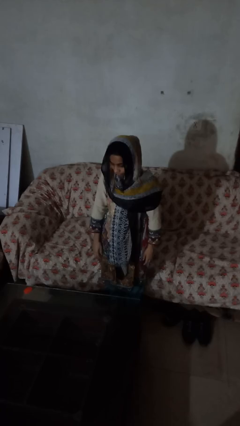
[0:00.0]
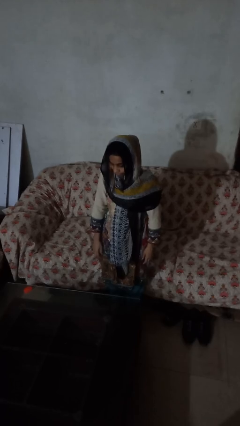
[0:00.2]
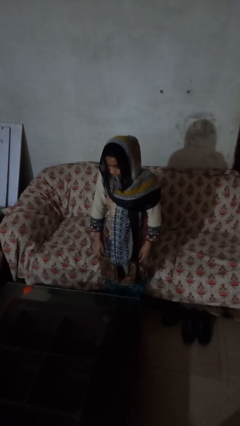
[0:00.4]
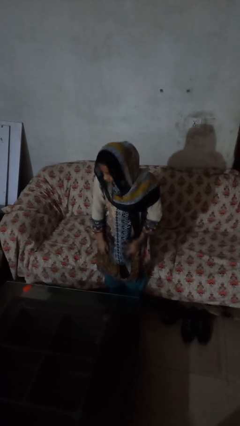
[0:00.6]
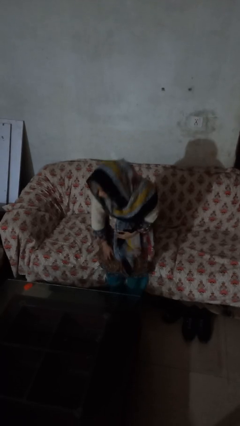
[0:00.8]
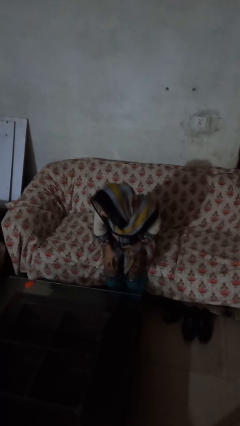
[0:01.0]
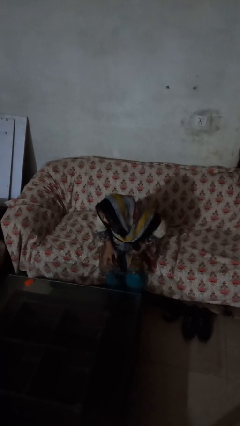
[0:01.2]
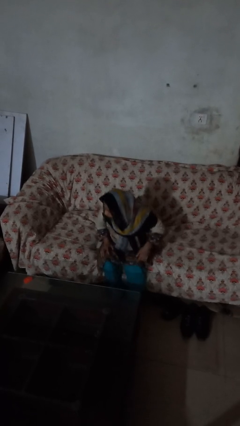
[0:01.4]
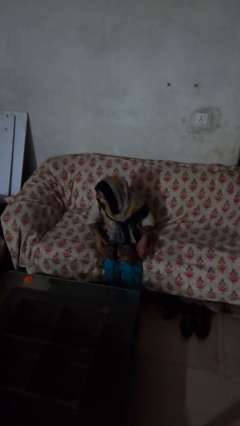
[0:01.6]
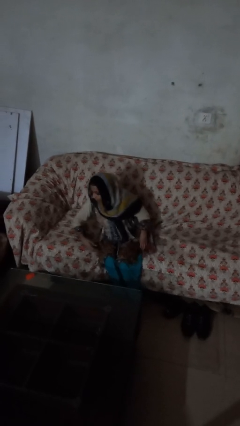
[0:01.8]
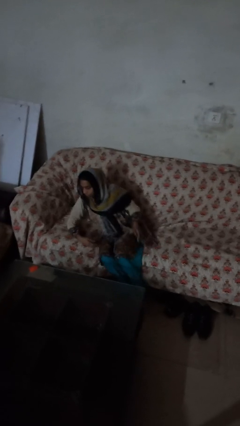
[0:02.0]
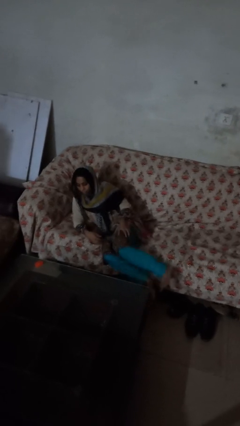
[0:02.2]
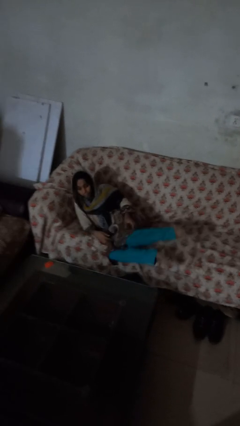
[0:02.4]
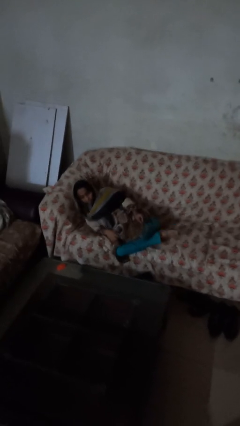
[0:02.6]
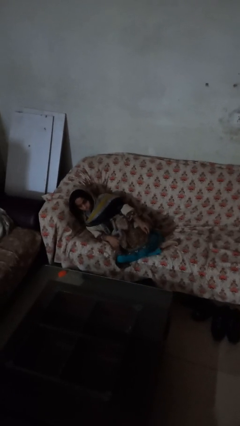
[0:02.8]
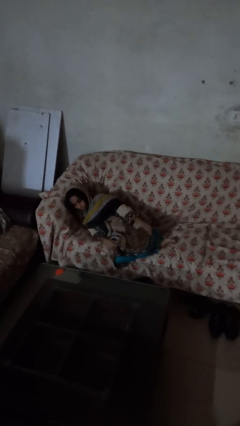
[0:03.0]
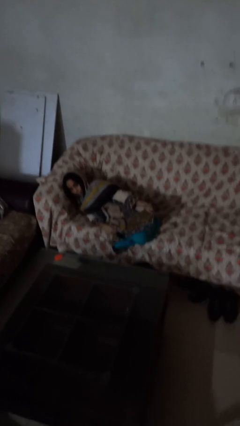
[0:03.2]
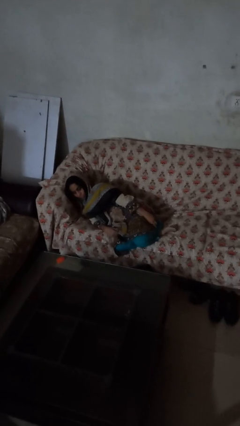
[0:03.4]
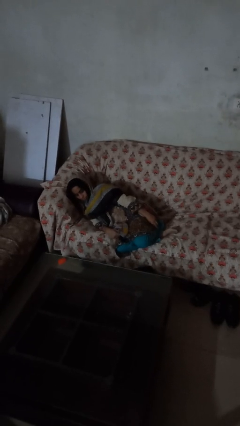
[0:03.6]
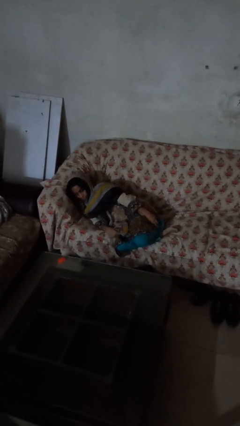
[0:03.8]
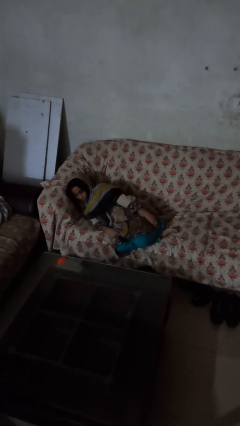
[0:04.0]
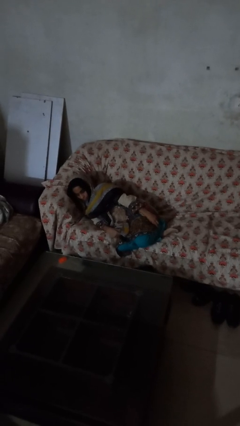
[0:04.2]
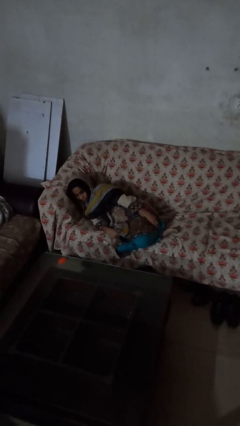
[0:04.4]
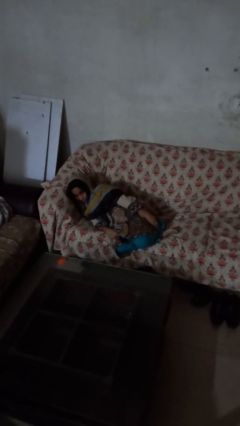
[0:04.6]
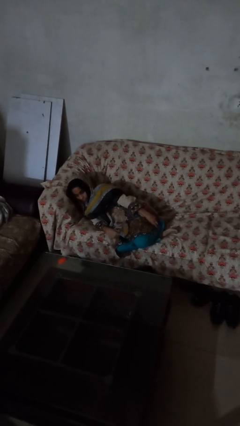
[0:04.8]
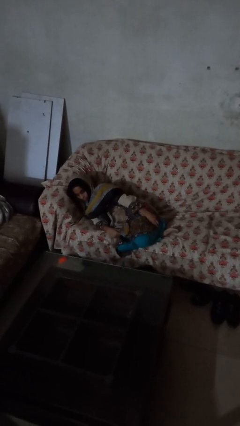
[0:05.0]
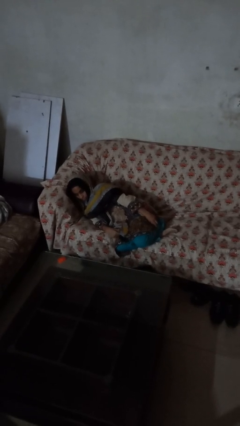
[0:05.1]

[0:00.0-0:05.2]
person lies down on couch

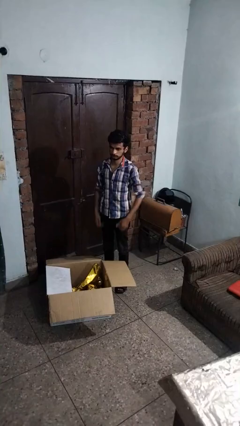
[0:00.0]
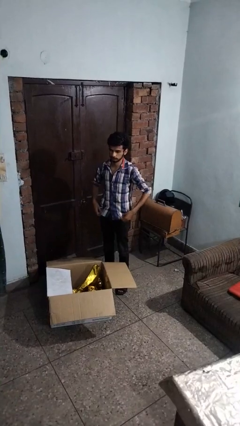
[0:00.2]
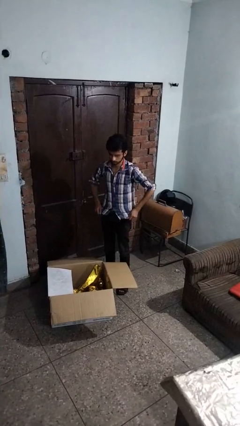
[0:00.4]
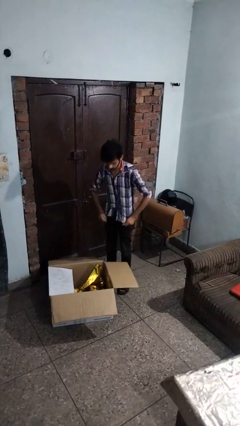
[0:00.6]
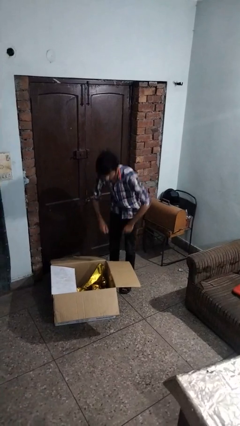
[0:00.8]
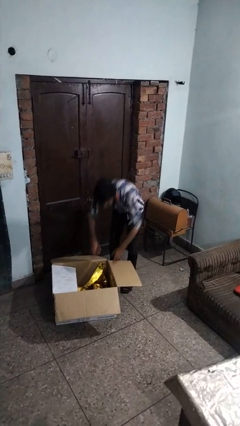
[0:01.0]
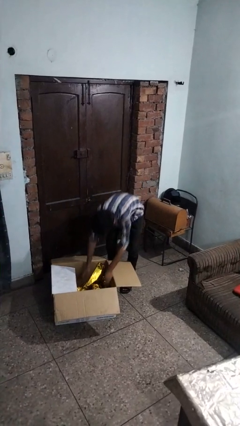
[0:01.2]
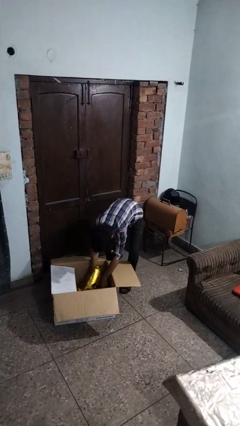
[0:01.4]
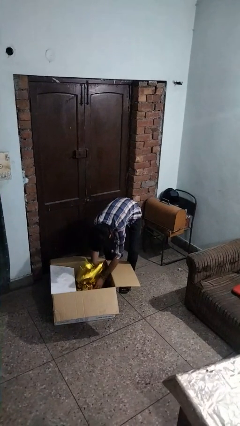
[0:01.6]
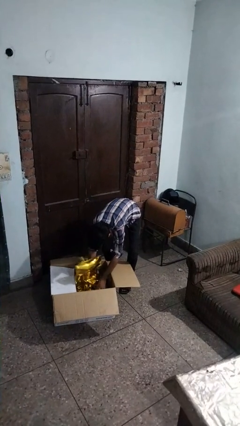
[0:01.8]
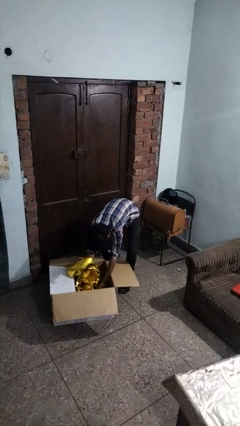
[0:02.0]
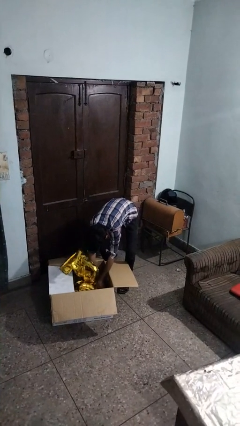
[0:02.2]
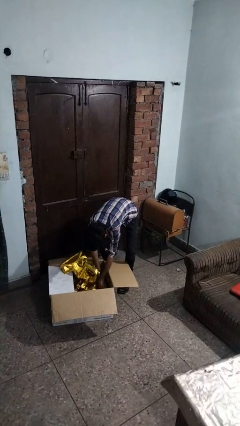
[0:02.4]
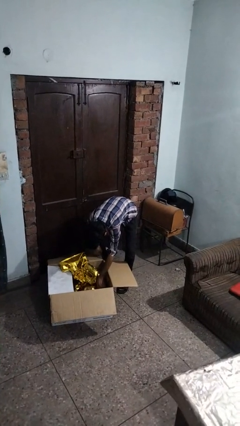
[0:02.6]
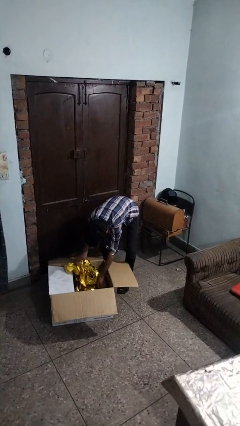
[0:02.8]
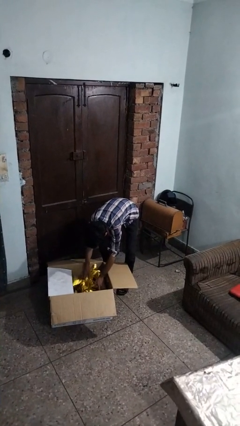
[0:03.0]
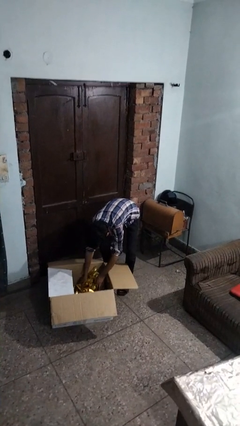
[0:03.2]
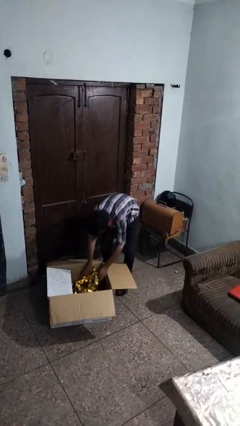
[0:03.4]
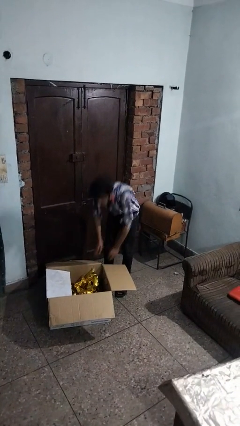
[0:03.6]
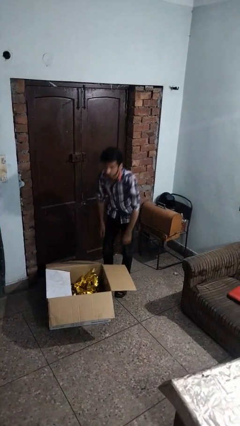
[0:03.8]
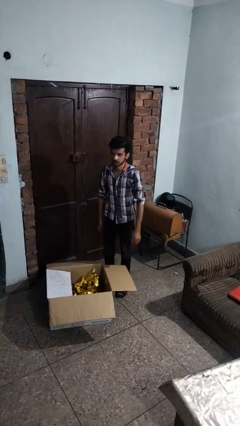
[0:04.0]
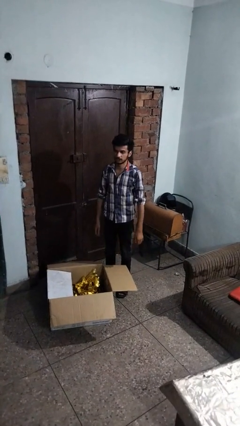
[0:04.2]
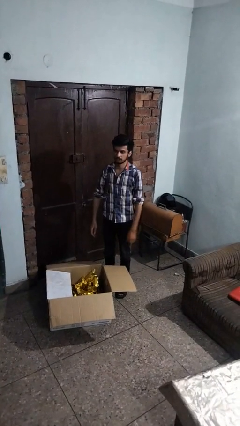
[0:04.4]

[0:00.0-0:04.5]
person searches in box

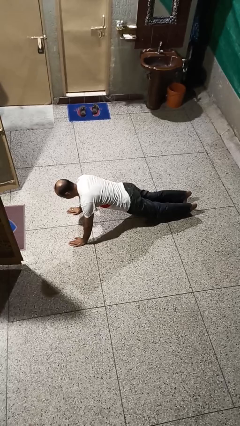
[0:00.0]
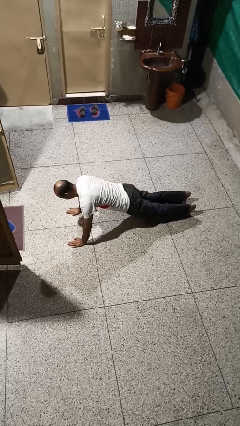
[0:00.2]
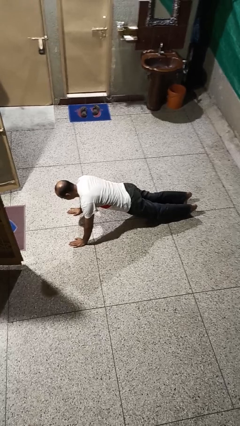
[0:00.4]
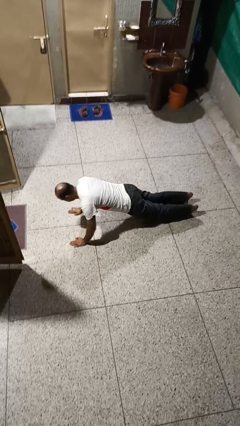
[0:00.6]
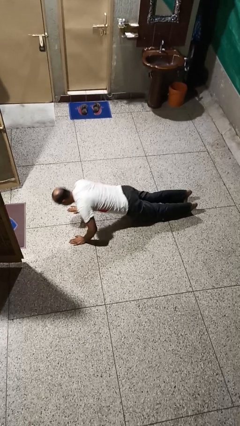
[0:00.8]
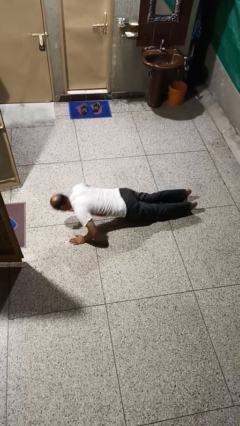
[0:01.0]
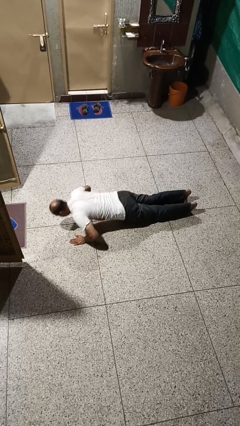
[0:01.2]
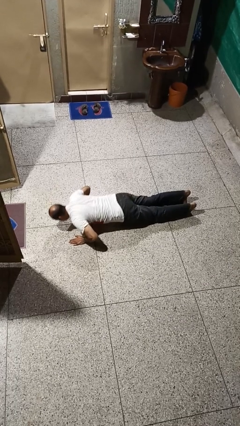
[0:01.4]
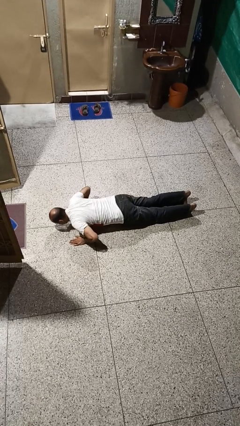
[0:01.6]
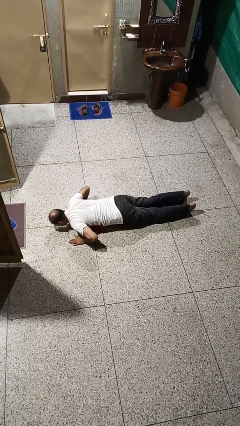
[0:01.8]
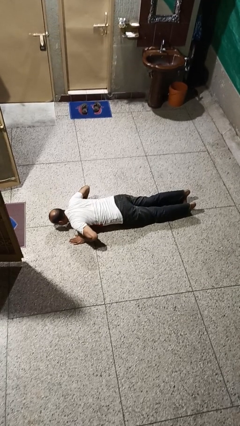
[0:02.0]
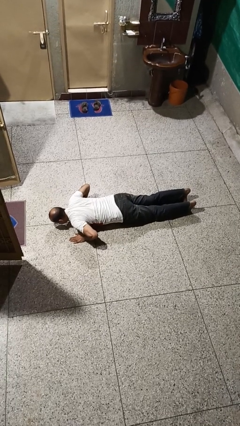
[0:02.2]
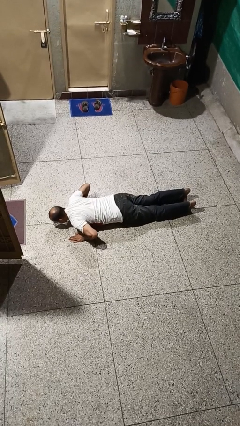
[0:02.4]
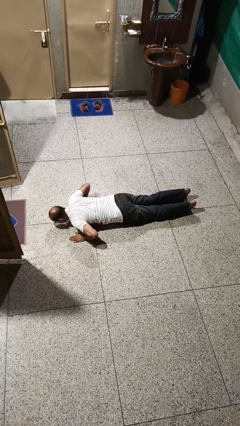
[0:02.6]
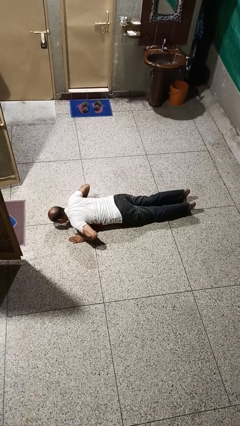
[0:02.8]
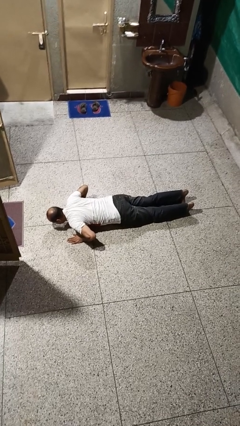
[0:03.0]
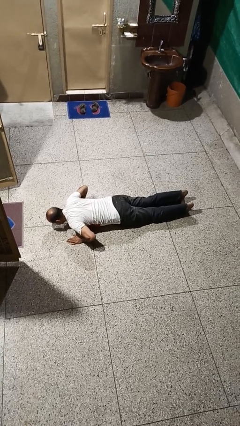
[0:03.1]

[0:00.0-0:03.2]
person exercises with pushup

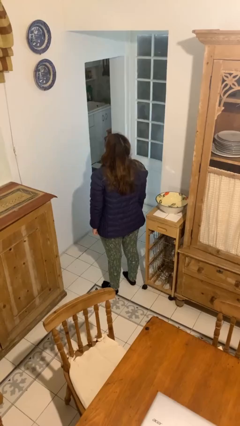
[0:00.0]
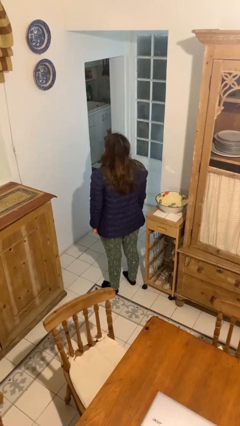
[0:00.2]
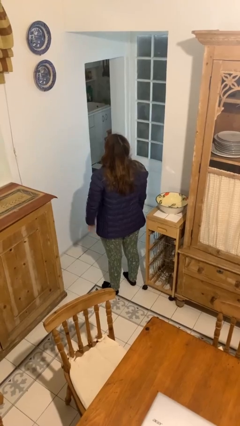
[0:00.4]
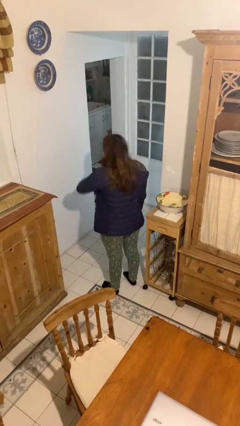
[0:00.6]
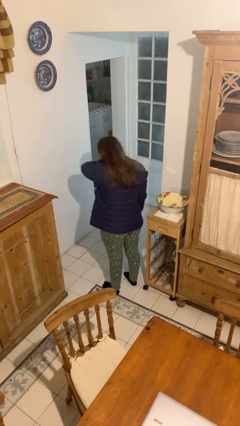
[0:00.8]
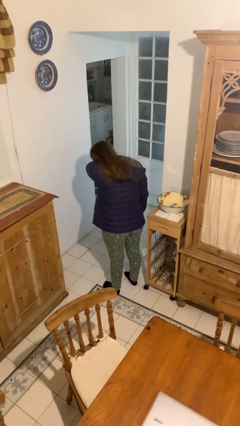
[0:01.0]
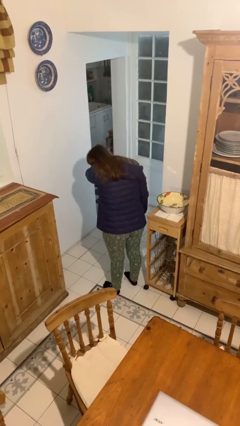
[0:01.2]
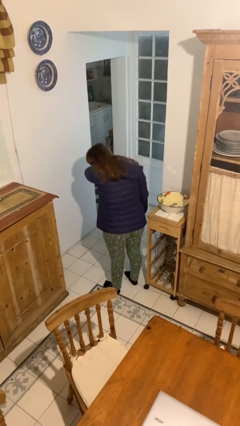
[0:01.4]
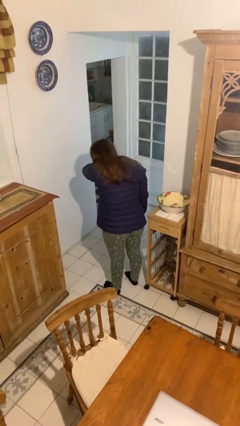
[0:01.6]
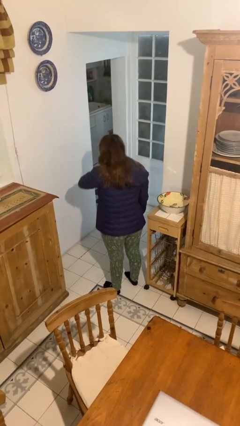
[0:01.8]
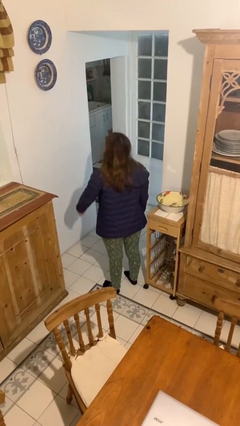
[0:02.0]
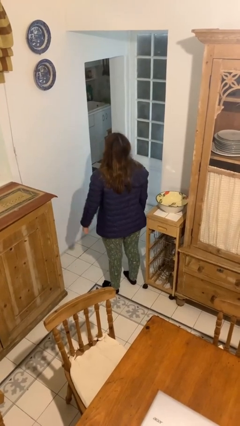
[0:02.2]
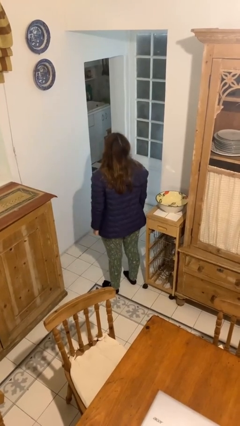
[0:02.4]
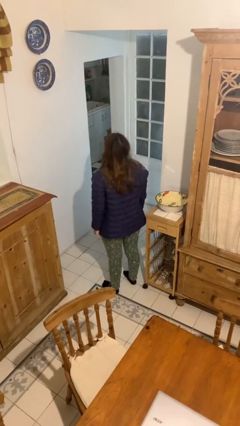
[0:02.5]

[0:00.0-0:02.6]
person sneezes into arm

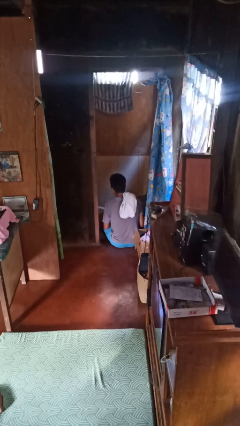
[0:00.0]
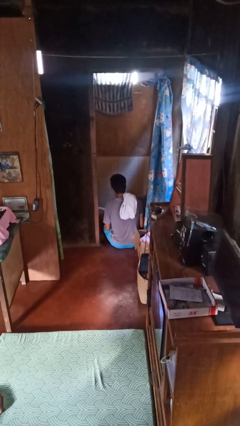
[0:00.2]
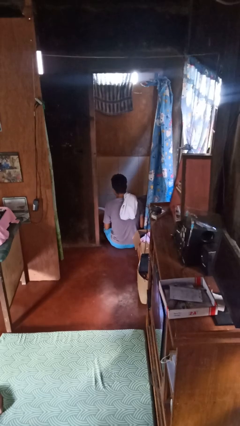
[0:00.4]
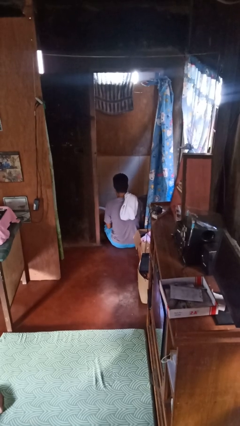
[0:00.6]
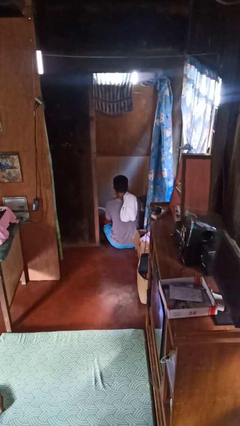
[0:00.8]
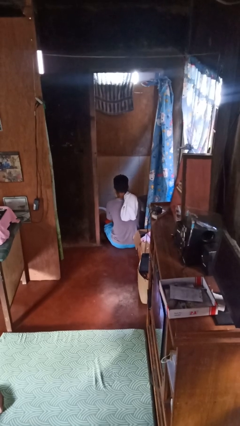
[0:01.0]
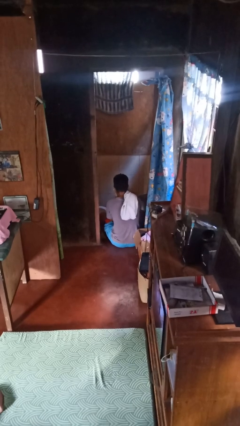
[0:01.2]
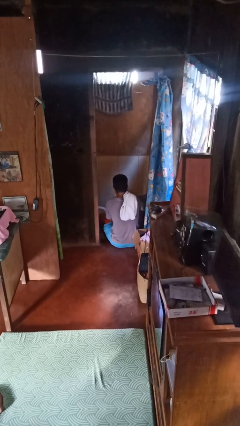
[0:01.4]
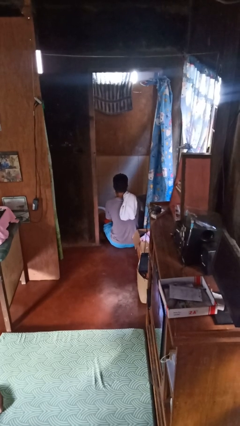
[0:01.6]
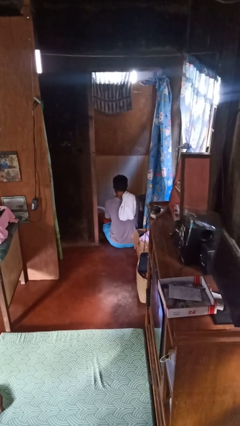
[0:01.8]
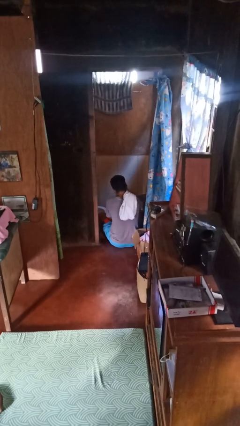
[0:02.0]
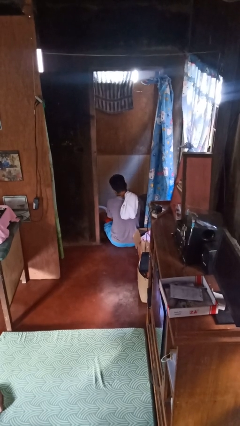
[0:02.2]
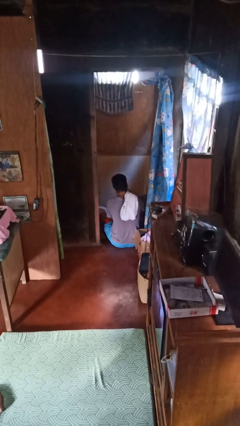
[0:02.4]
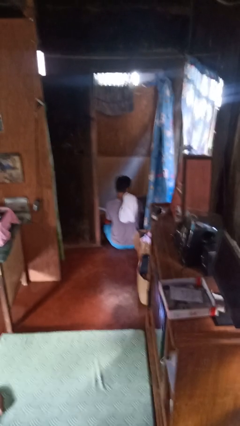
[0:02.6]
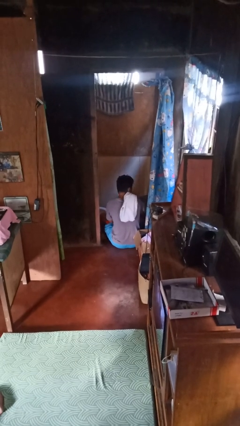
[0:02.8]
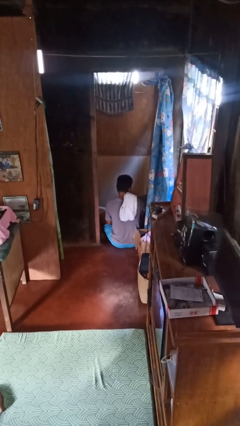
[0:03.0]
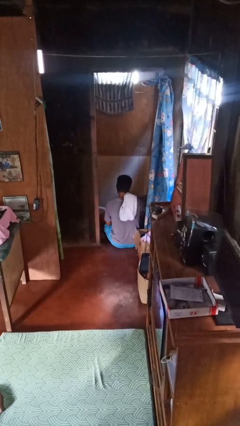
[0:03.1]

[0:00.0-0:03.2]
person dries face with towel
